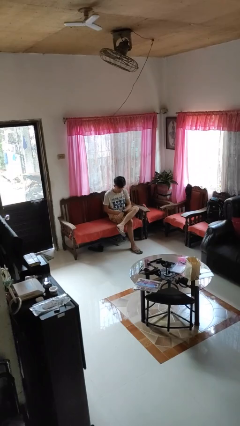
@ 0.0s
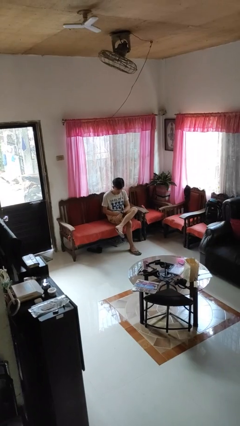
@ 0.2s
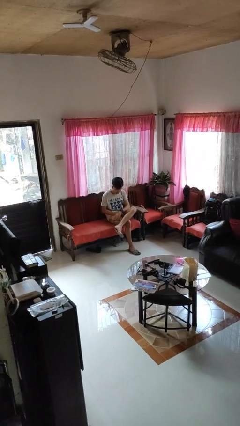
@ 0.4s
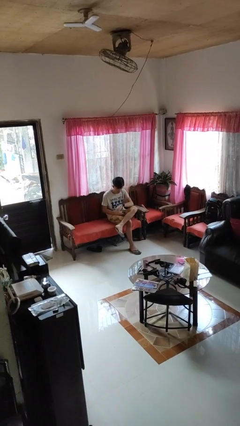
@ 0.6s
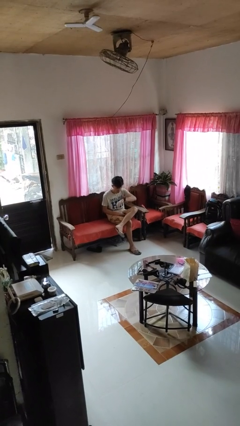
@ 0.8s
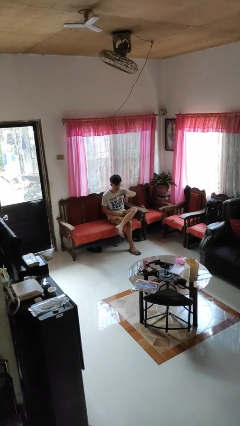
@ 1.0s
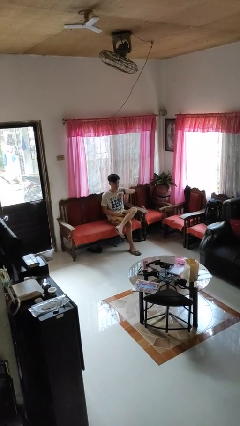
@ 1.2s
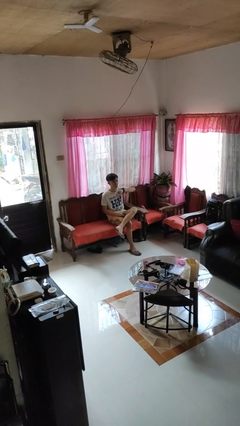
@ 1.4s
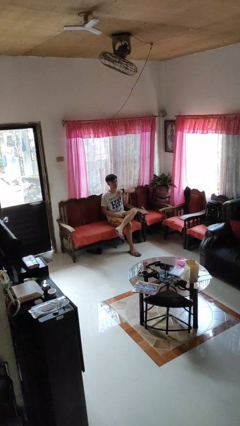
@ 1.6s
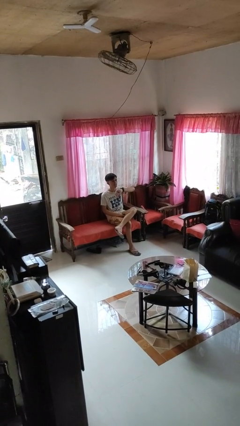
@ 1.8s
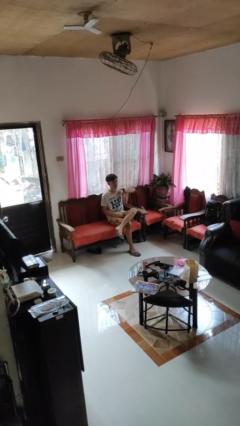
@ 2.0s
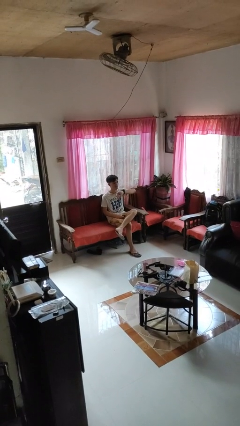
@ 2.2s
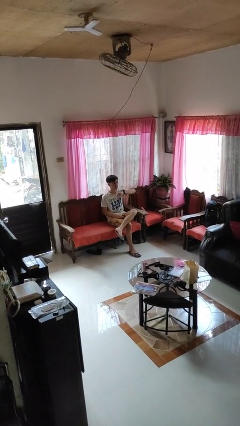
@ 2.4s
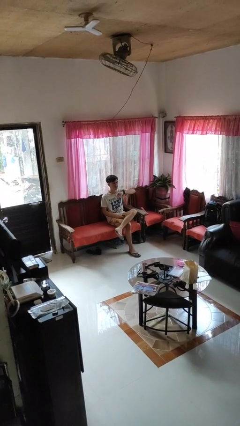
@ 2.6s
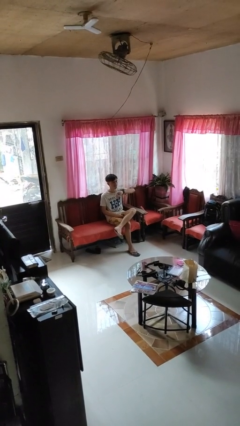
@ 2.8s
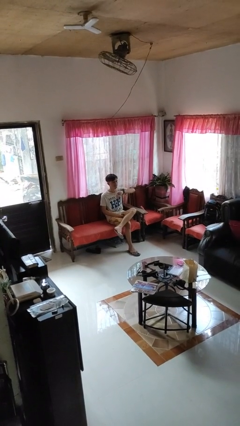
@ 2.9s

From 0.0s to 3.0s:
person looks at wristwatch

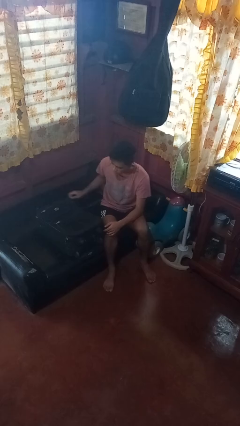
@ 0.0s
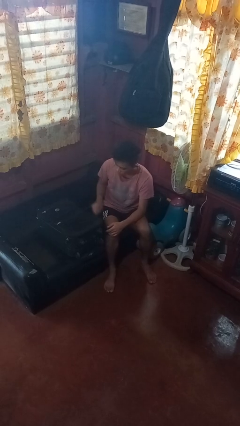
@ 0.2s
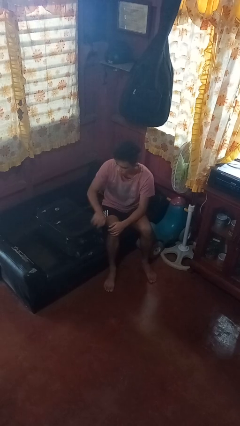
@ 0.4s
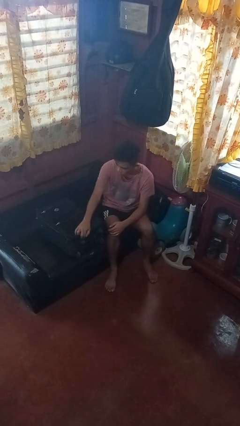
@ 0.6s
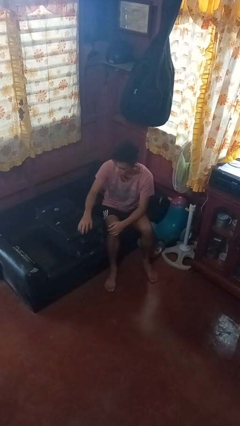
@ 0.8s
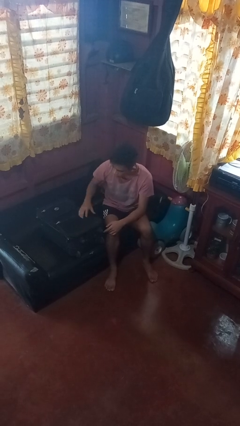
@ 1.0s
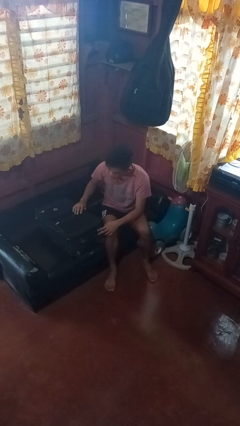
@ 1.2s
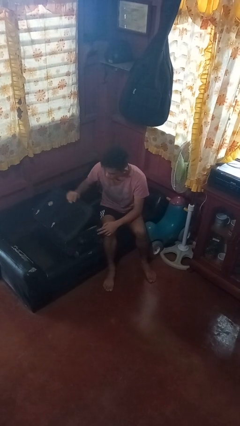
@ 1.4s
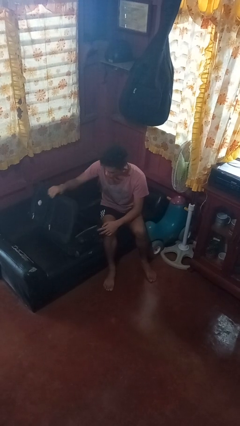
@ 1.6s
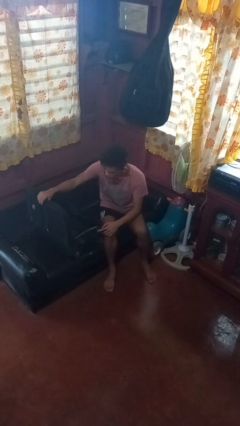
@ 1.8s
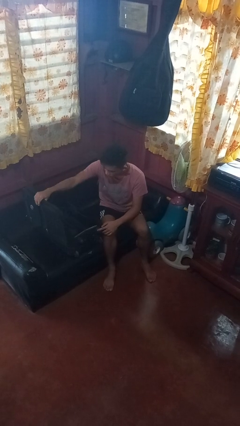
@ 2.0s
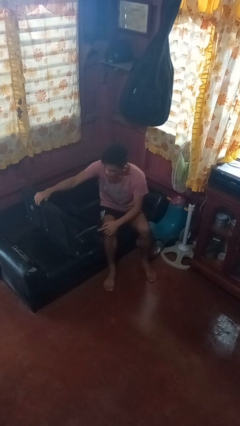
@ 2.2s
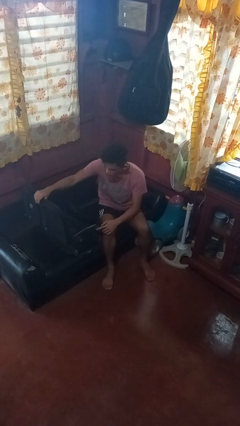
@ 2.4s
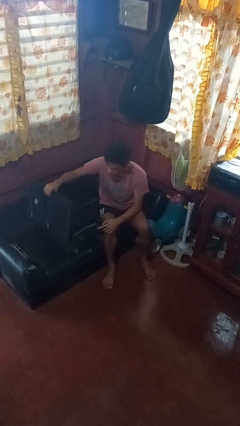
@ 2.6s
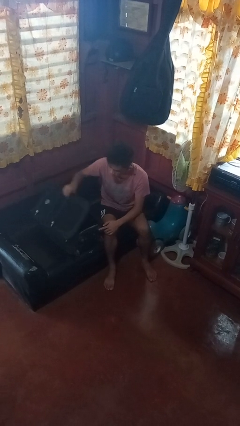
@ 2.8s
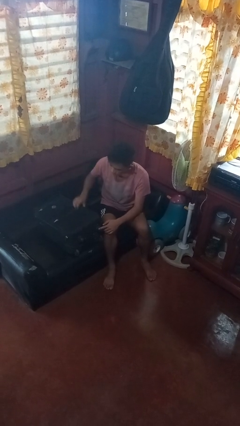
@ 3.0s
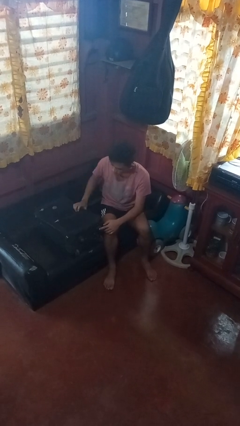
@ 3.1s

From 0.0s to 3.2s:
person opens suitcase

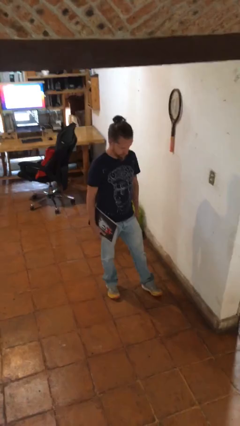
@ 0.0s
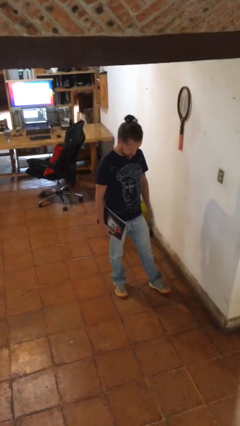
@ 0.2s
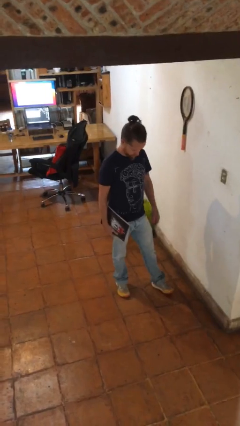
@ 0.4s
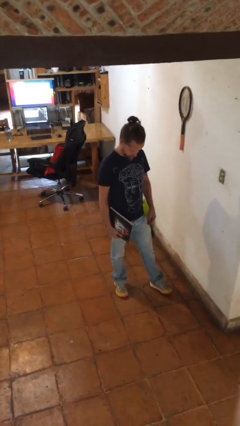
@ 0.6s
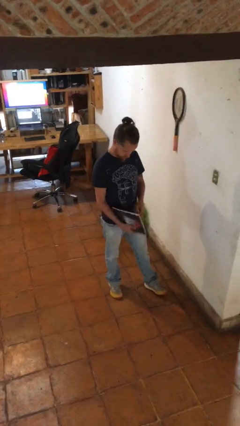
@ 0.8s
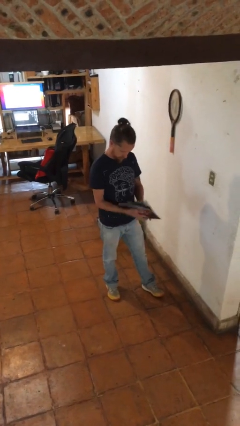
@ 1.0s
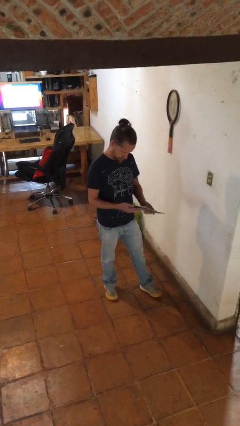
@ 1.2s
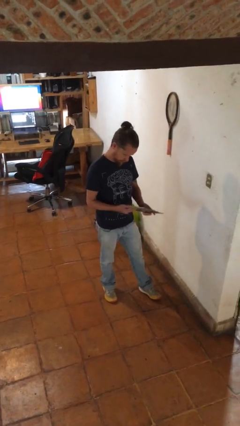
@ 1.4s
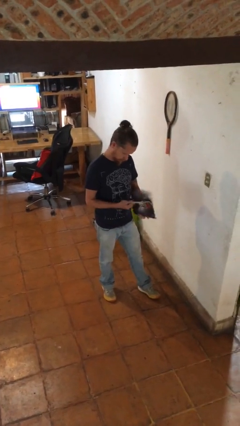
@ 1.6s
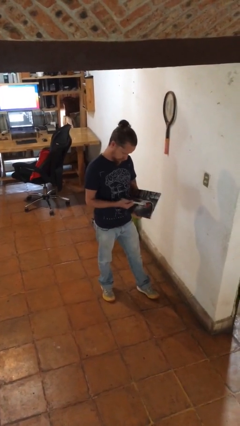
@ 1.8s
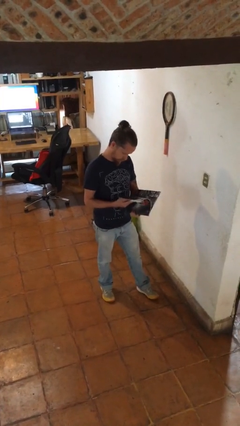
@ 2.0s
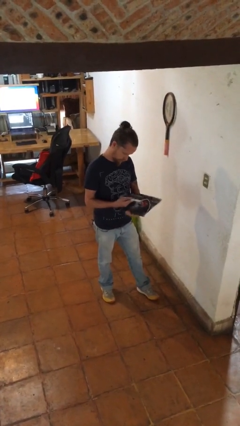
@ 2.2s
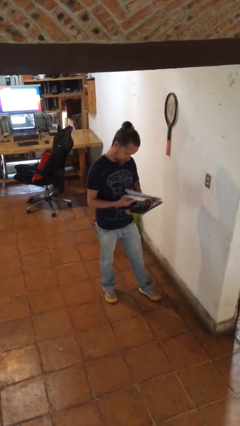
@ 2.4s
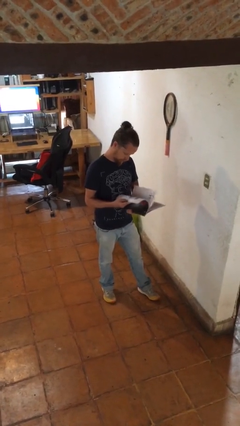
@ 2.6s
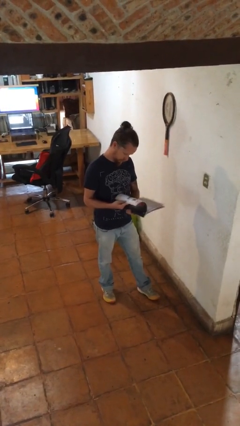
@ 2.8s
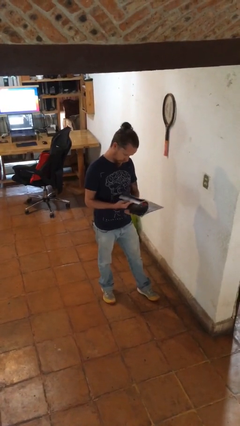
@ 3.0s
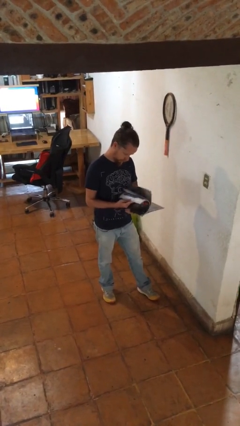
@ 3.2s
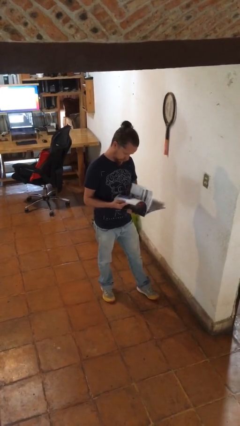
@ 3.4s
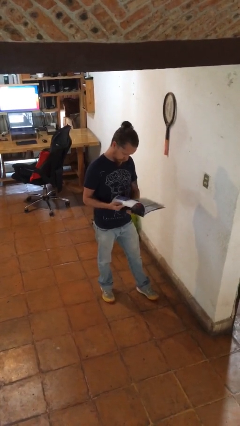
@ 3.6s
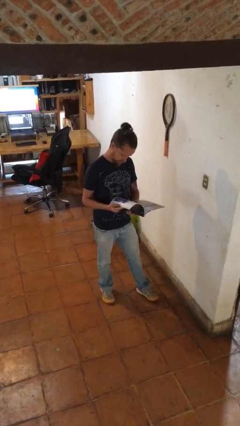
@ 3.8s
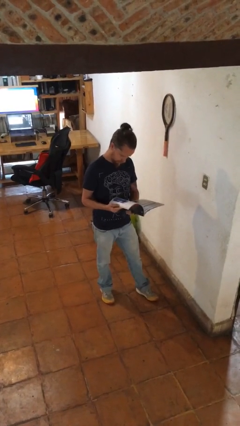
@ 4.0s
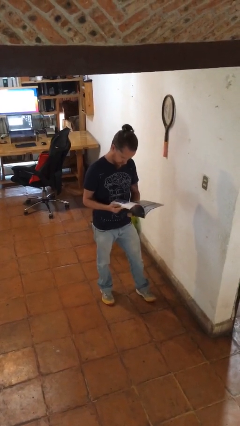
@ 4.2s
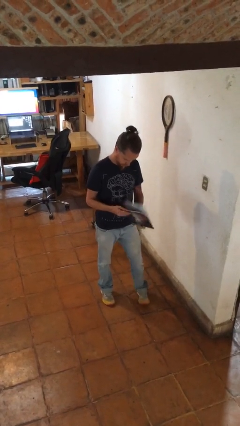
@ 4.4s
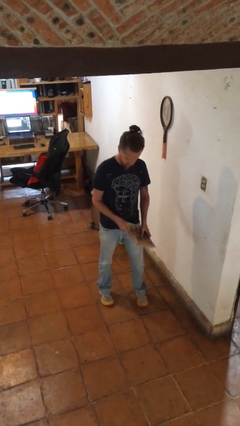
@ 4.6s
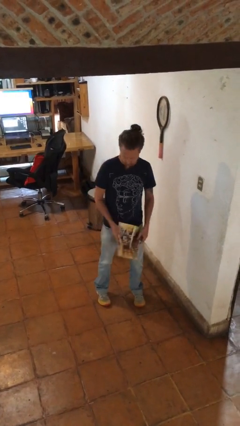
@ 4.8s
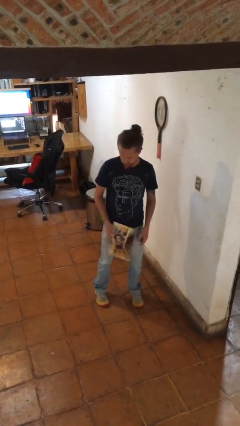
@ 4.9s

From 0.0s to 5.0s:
person reads magazine

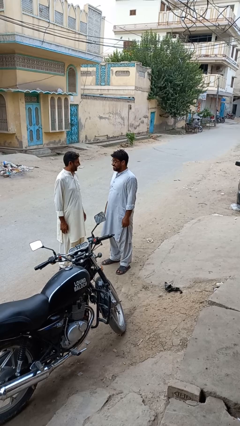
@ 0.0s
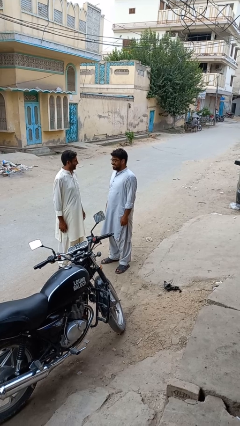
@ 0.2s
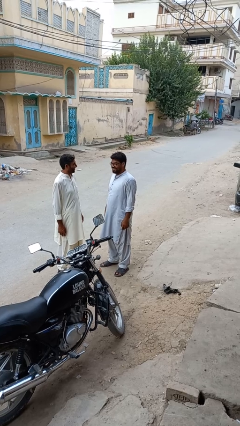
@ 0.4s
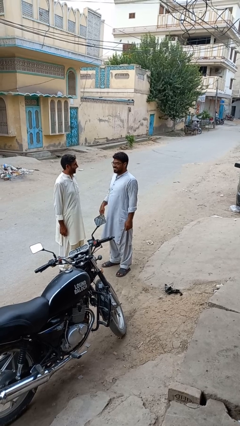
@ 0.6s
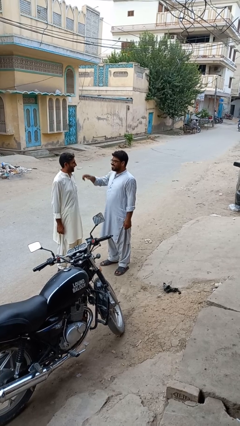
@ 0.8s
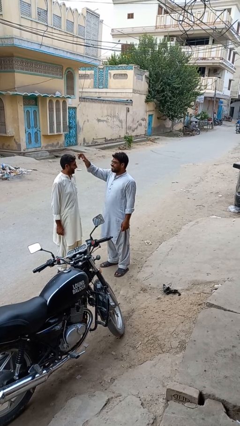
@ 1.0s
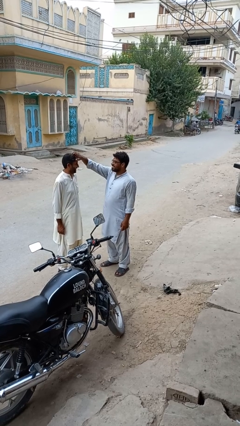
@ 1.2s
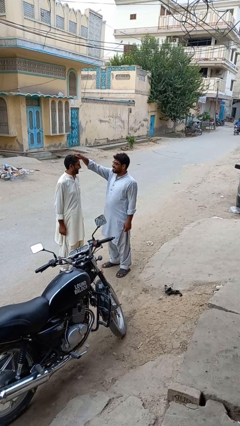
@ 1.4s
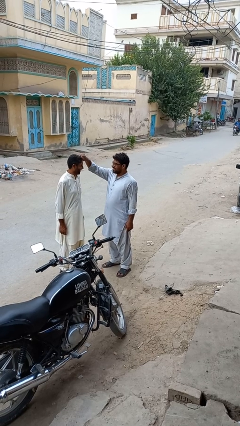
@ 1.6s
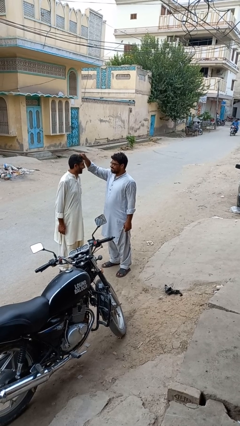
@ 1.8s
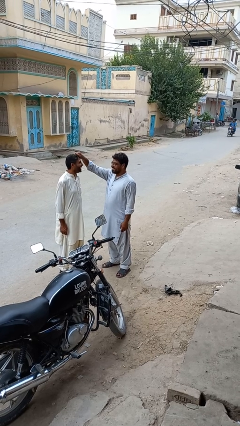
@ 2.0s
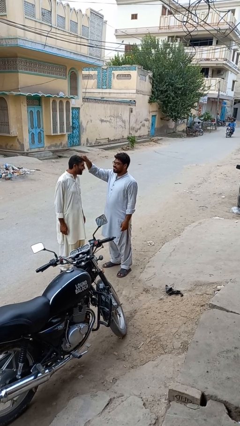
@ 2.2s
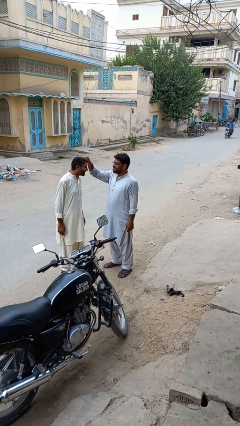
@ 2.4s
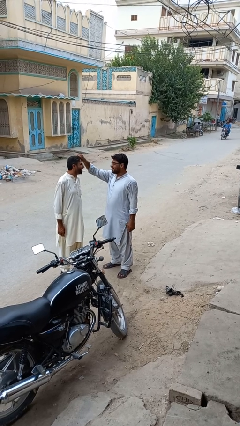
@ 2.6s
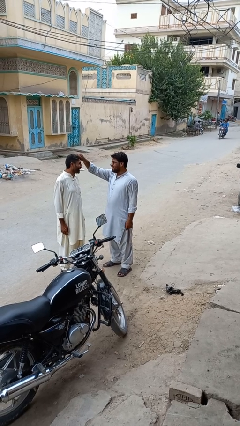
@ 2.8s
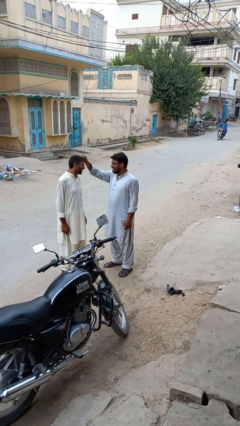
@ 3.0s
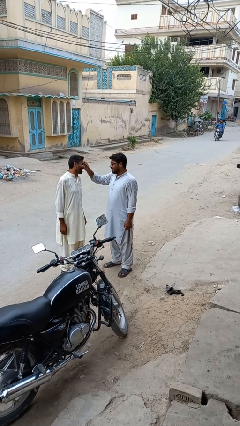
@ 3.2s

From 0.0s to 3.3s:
person grabs person by hair

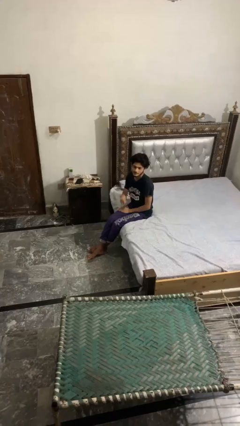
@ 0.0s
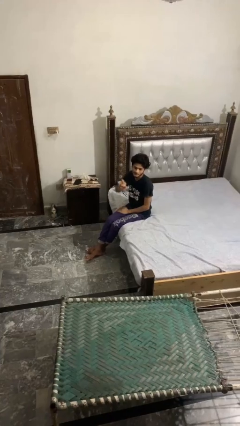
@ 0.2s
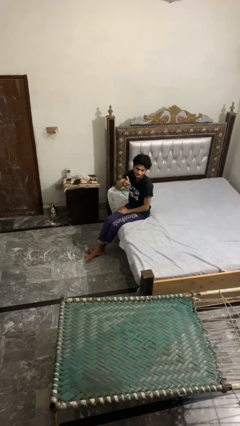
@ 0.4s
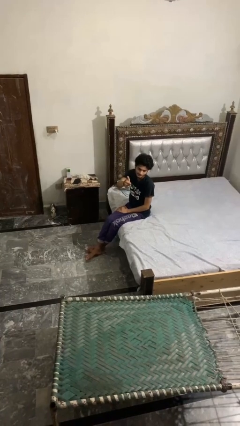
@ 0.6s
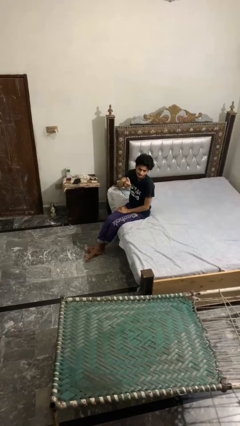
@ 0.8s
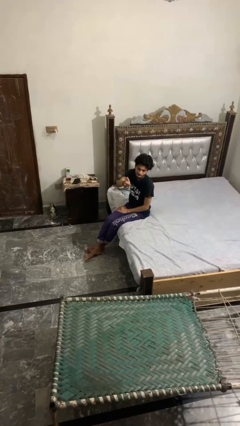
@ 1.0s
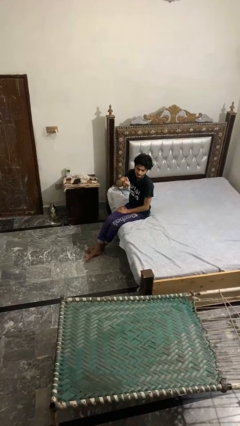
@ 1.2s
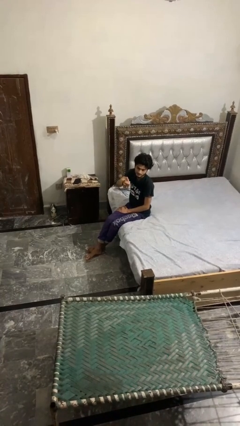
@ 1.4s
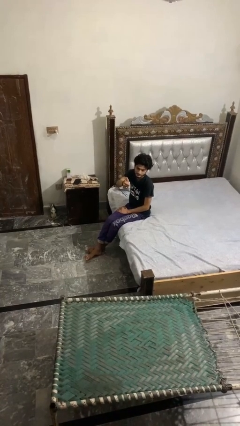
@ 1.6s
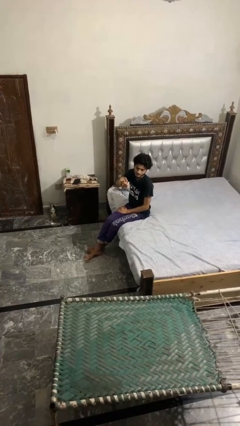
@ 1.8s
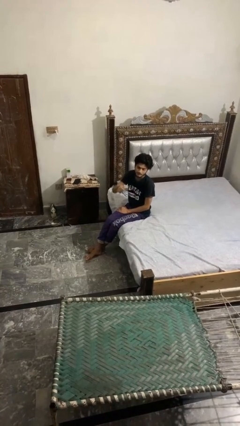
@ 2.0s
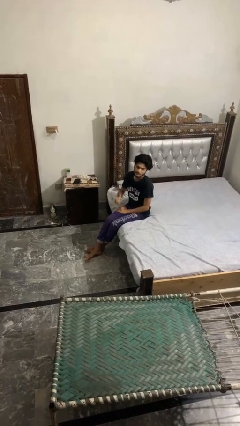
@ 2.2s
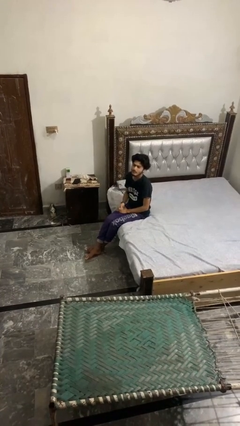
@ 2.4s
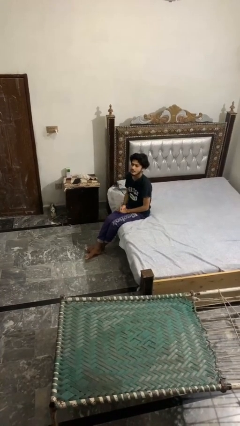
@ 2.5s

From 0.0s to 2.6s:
person gestures thumbs up
